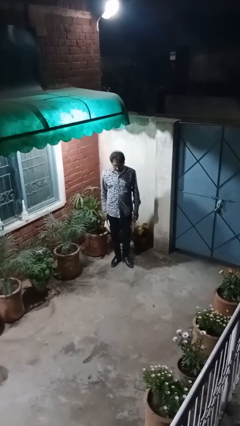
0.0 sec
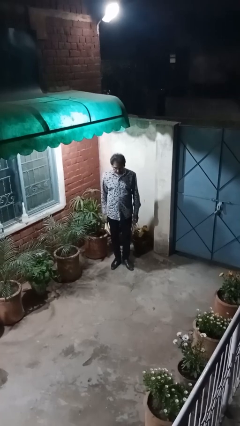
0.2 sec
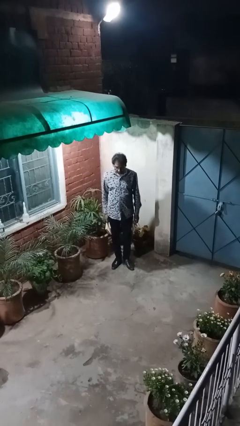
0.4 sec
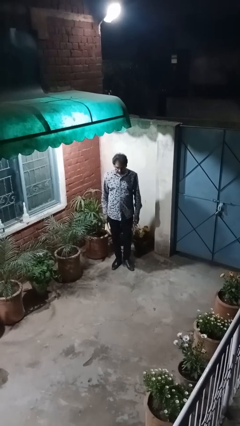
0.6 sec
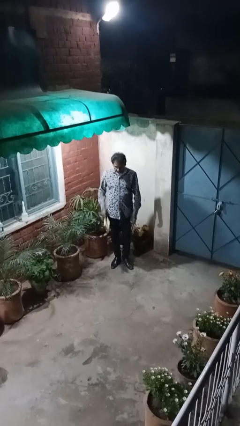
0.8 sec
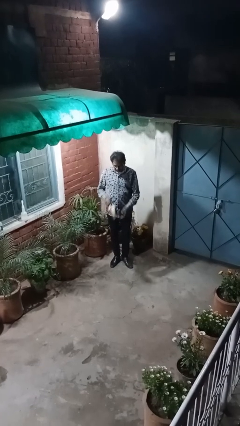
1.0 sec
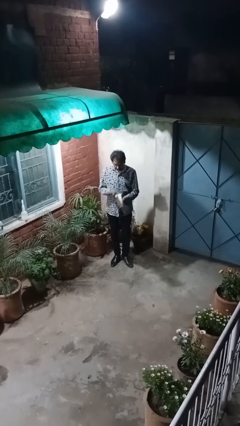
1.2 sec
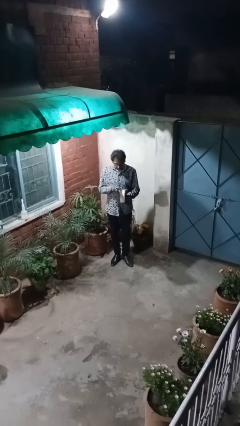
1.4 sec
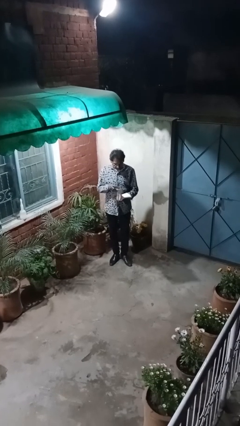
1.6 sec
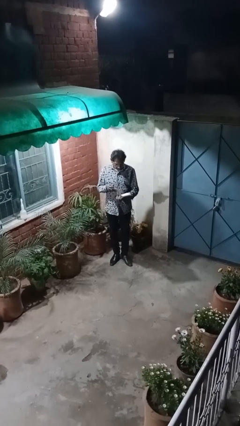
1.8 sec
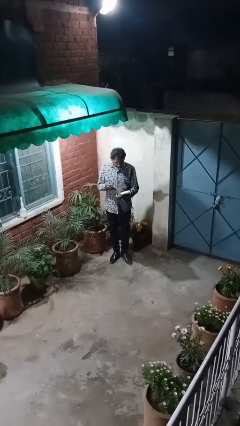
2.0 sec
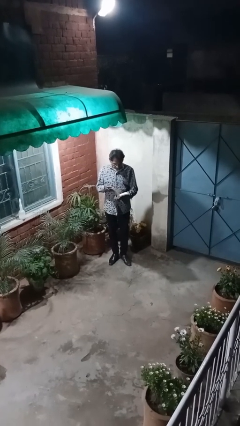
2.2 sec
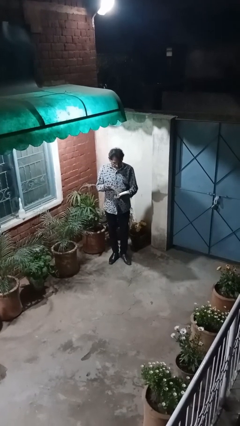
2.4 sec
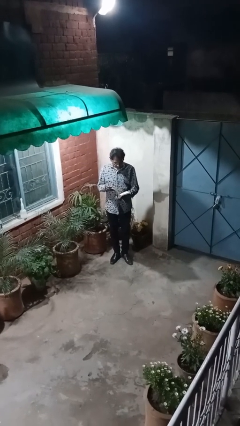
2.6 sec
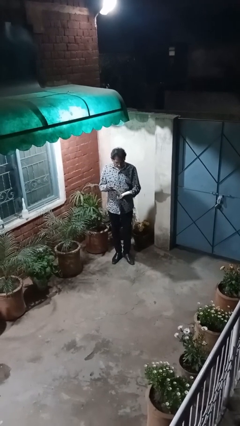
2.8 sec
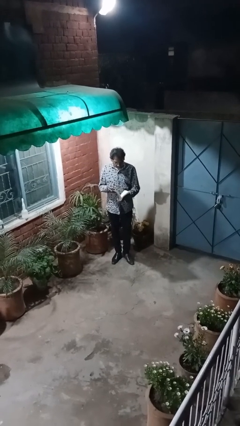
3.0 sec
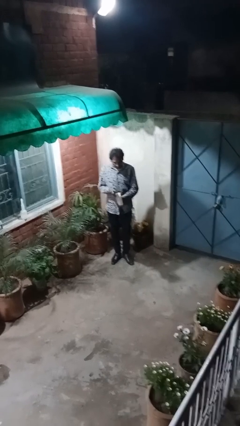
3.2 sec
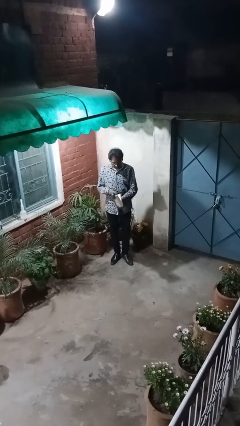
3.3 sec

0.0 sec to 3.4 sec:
person reads document

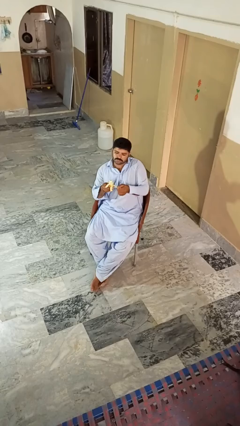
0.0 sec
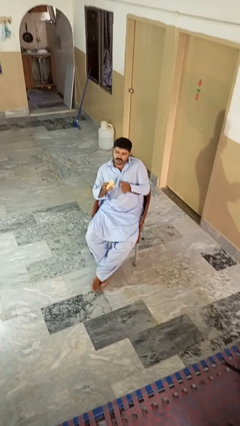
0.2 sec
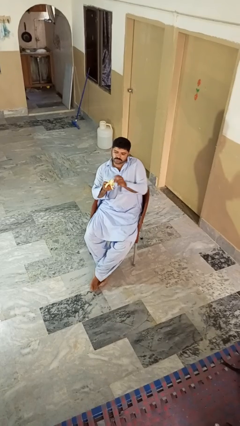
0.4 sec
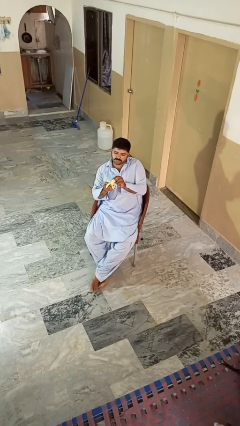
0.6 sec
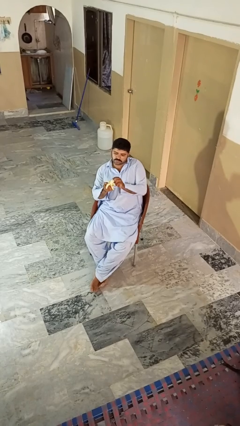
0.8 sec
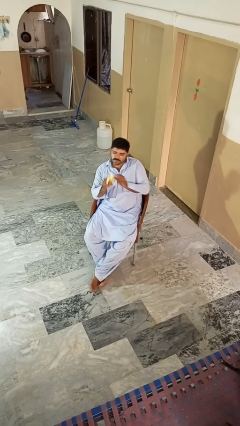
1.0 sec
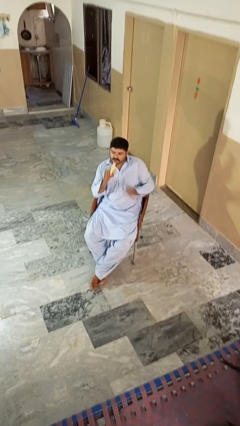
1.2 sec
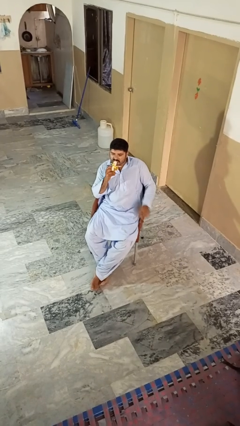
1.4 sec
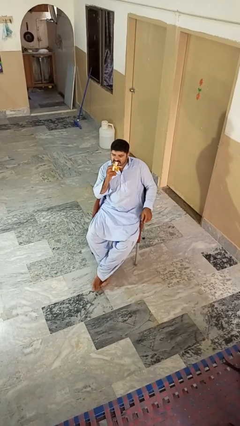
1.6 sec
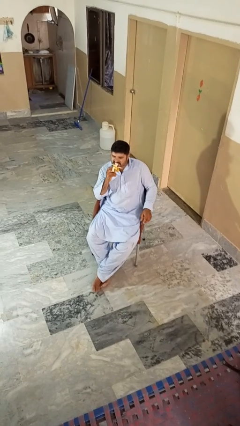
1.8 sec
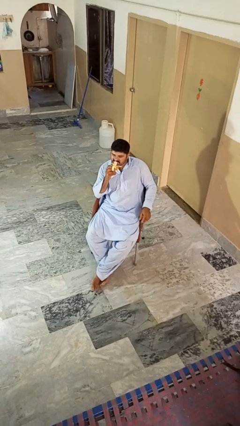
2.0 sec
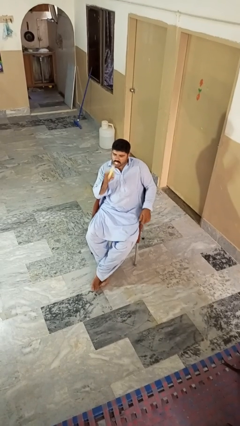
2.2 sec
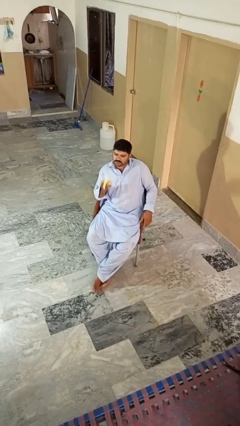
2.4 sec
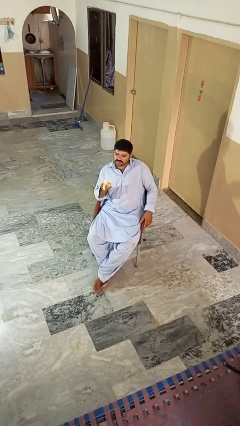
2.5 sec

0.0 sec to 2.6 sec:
person eats banana

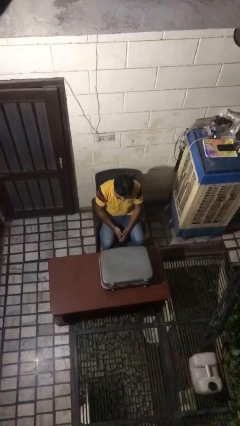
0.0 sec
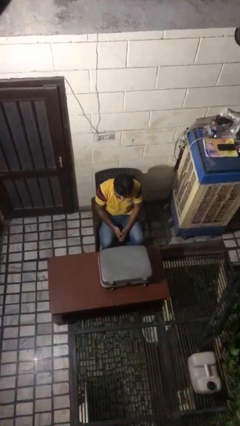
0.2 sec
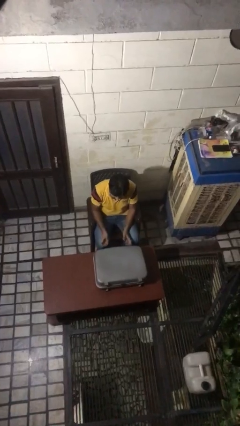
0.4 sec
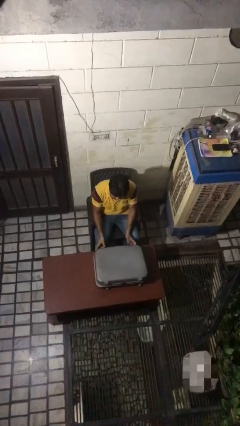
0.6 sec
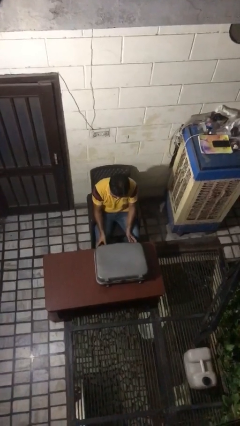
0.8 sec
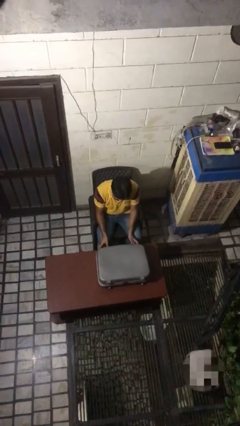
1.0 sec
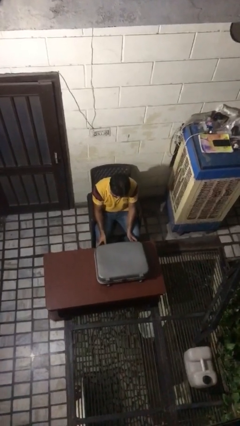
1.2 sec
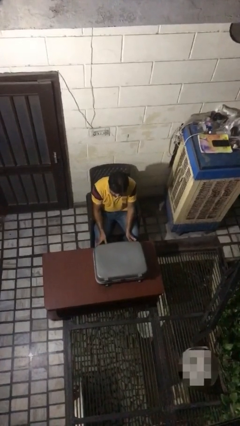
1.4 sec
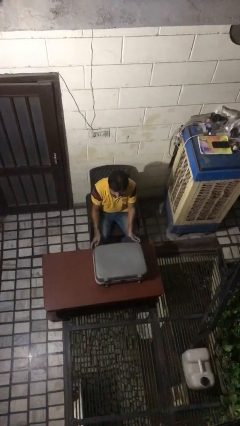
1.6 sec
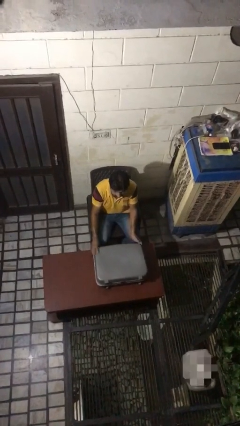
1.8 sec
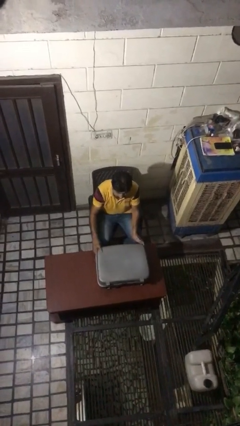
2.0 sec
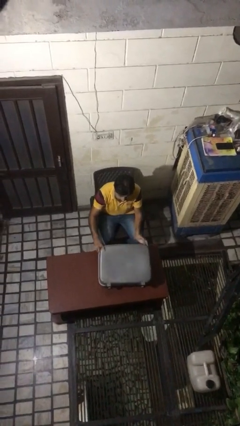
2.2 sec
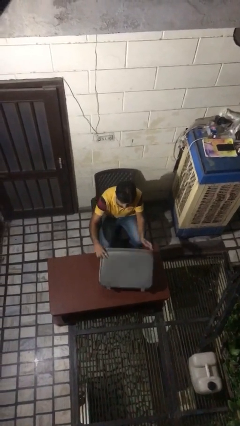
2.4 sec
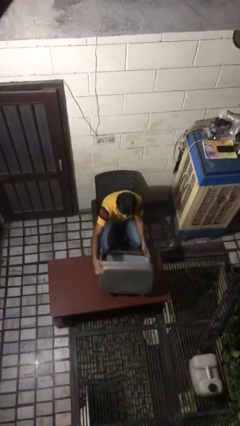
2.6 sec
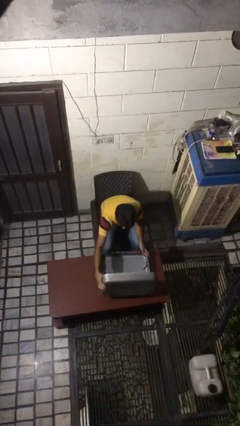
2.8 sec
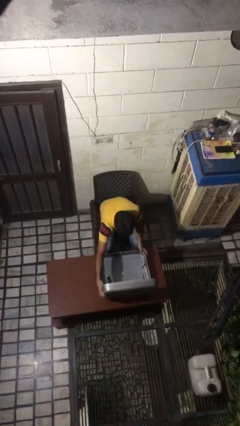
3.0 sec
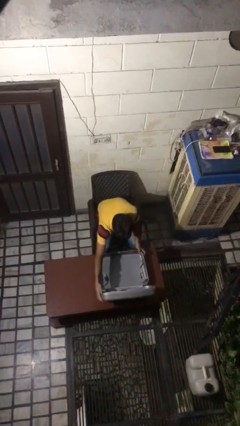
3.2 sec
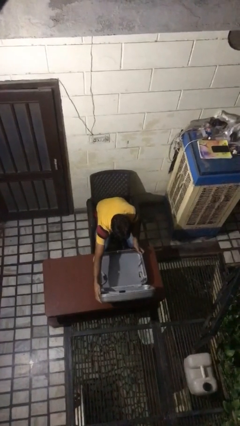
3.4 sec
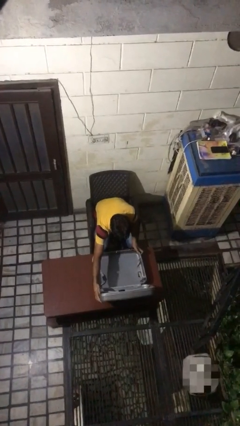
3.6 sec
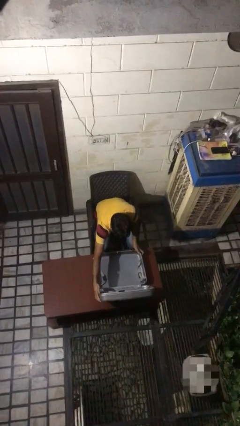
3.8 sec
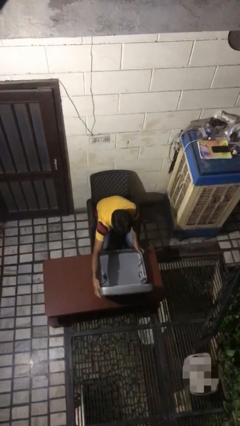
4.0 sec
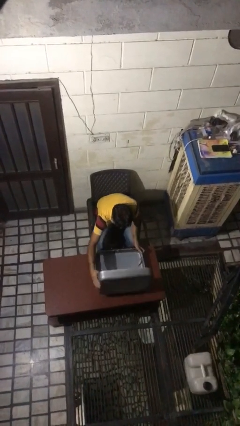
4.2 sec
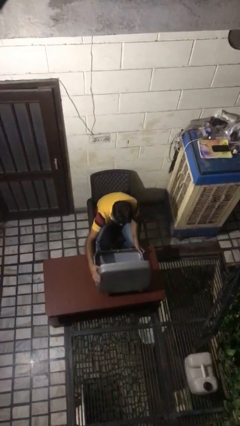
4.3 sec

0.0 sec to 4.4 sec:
person opens suitcase

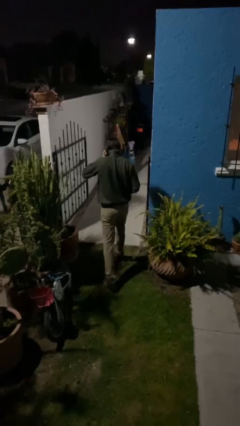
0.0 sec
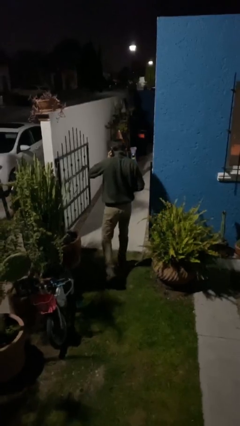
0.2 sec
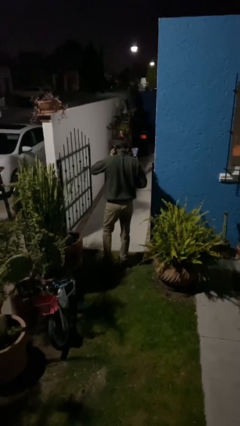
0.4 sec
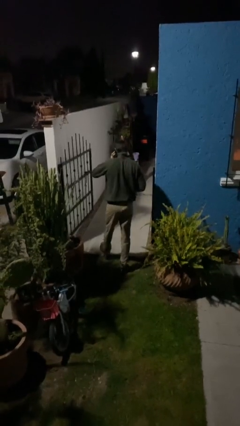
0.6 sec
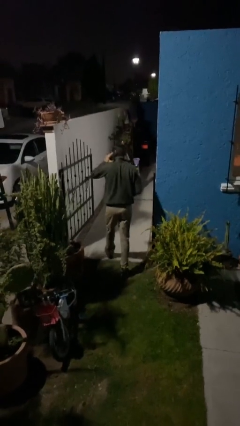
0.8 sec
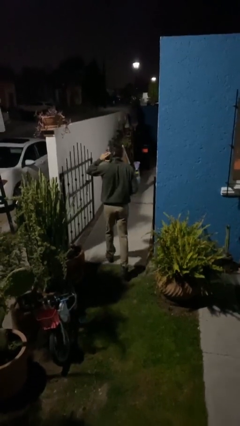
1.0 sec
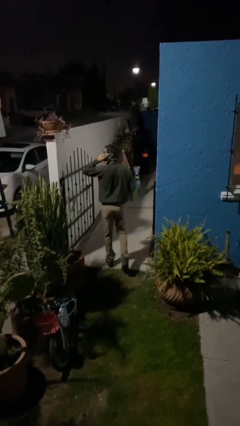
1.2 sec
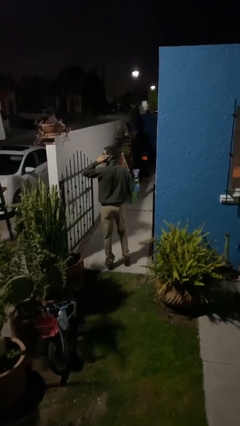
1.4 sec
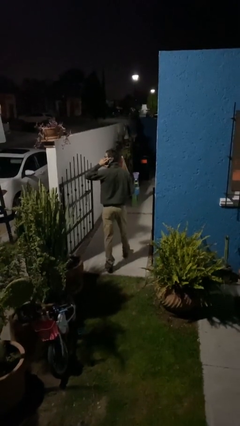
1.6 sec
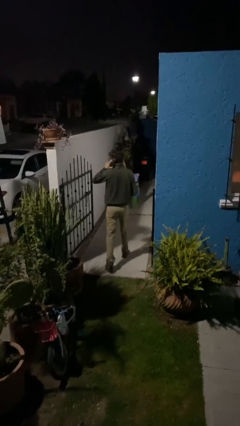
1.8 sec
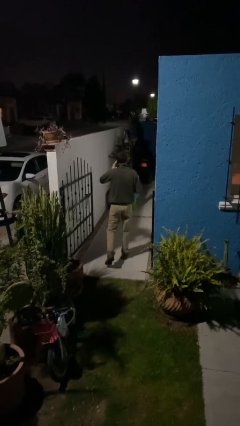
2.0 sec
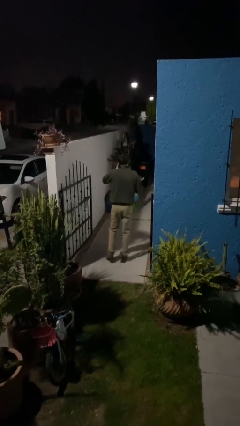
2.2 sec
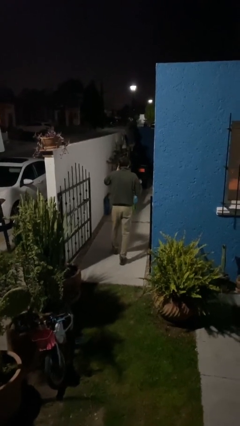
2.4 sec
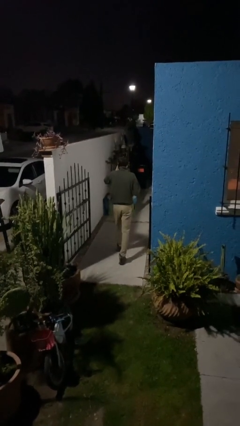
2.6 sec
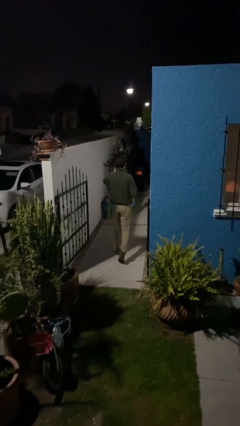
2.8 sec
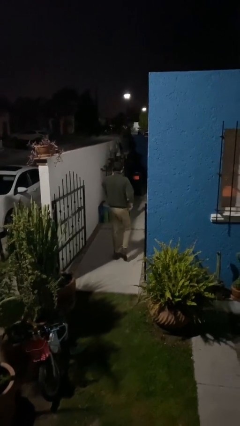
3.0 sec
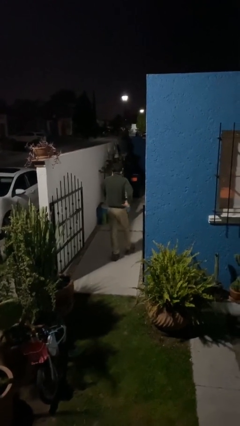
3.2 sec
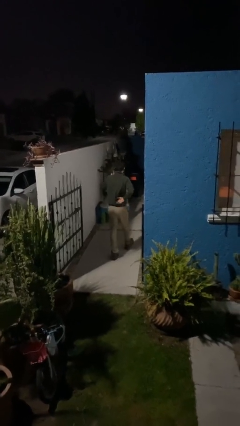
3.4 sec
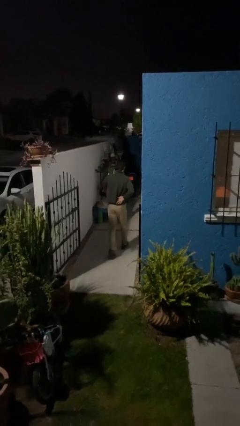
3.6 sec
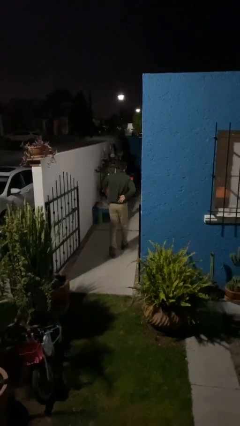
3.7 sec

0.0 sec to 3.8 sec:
person exits scene through structure

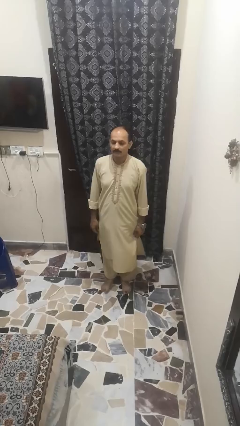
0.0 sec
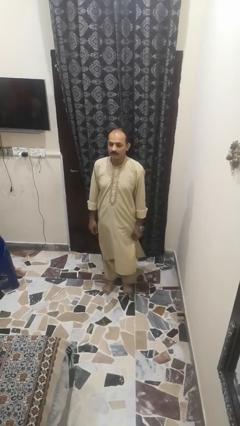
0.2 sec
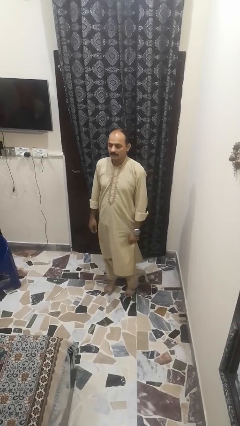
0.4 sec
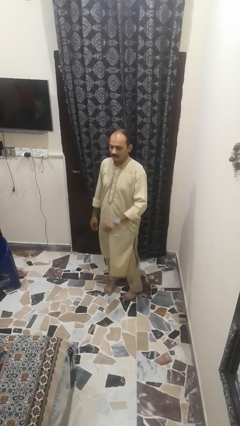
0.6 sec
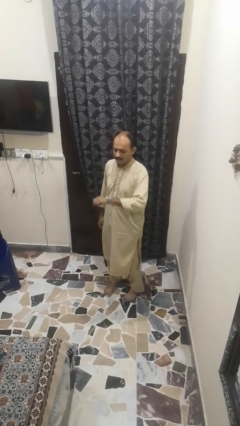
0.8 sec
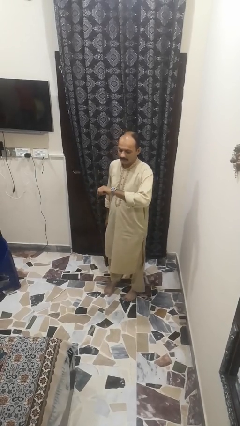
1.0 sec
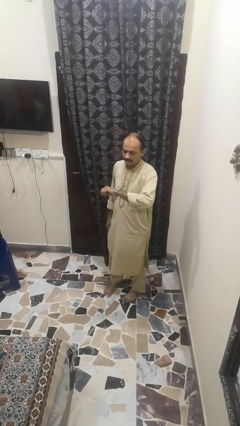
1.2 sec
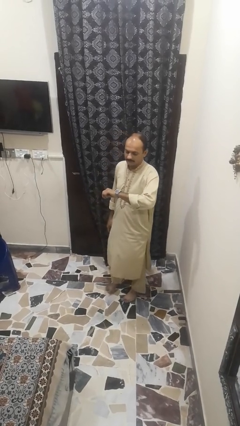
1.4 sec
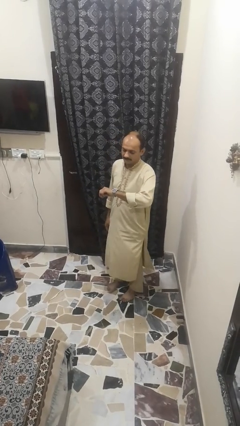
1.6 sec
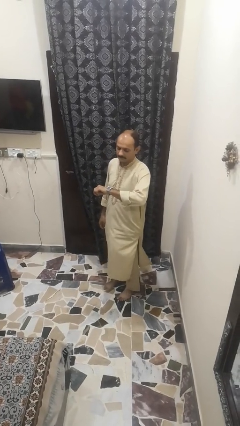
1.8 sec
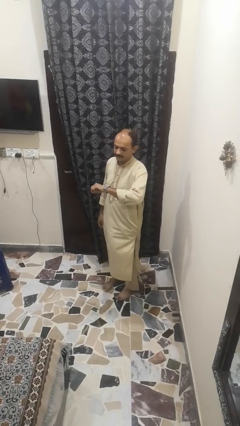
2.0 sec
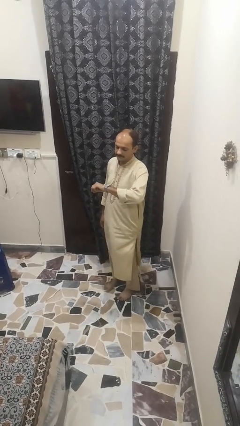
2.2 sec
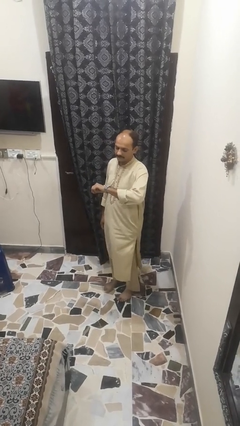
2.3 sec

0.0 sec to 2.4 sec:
person looks at wristwatch

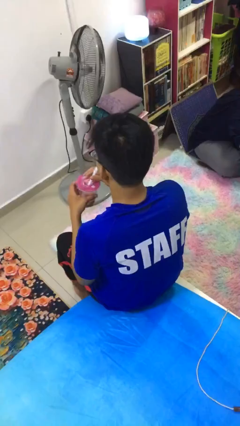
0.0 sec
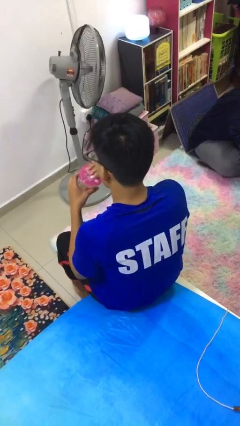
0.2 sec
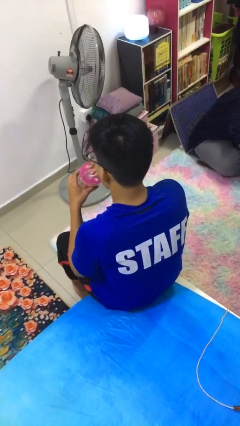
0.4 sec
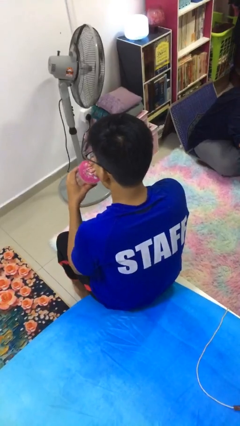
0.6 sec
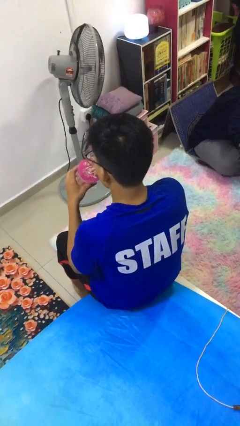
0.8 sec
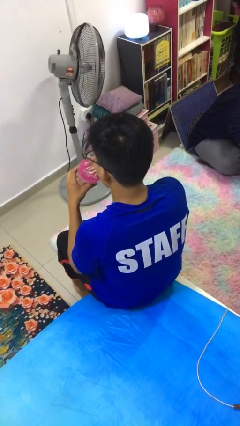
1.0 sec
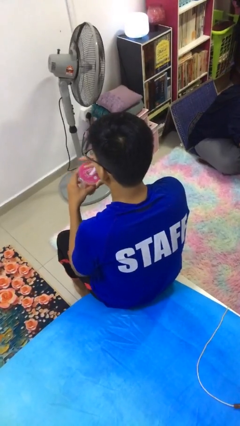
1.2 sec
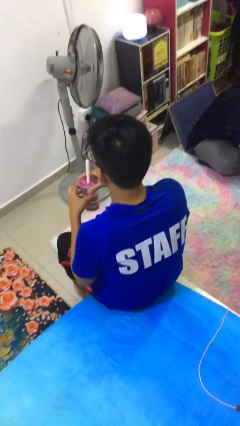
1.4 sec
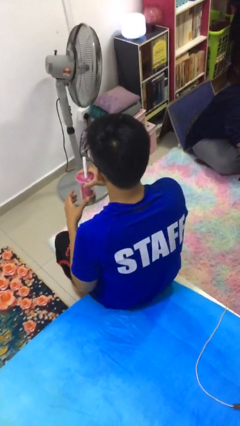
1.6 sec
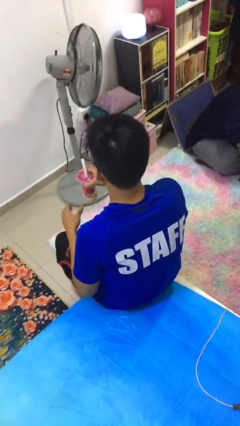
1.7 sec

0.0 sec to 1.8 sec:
person drinks from straw
